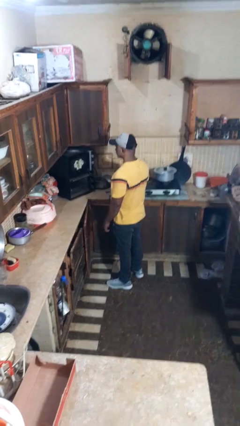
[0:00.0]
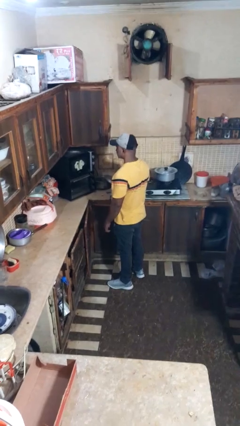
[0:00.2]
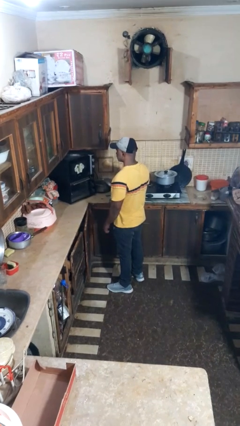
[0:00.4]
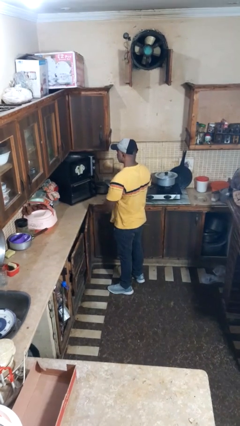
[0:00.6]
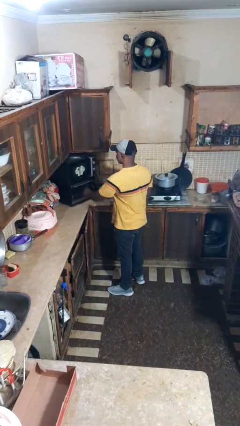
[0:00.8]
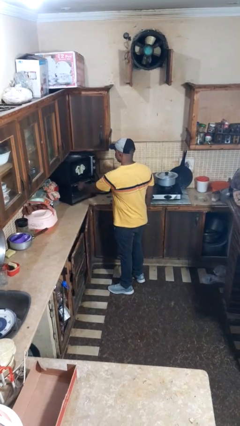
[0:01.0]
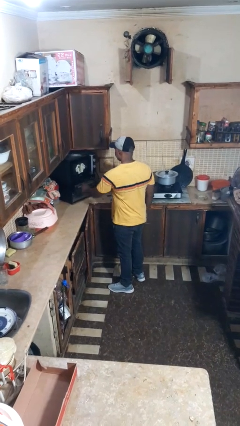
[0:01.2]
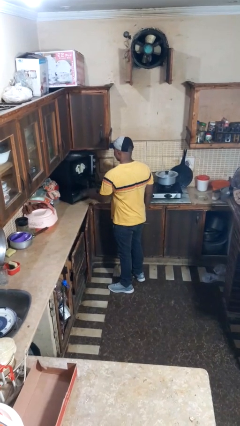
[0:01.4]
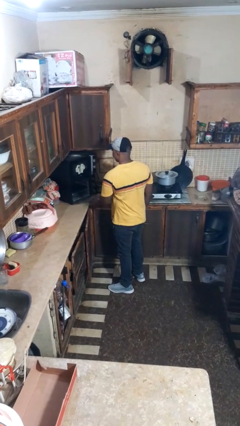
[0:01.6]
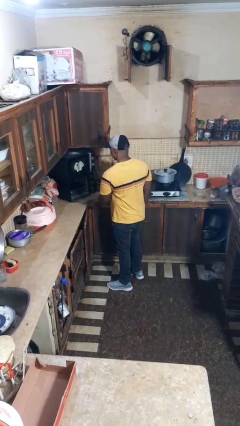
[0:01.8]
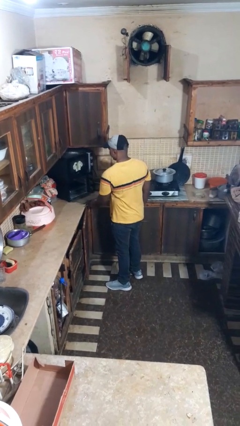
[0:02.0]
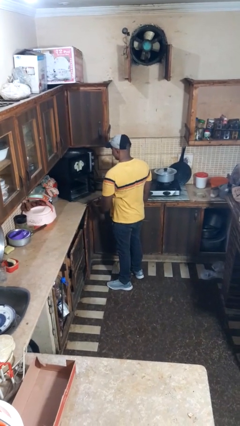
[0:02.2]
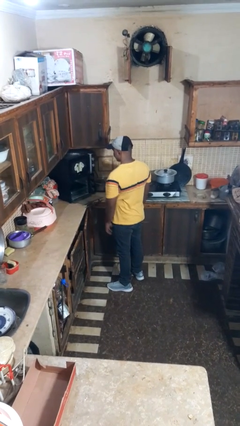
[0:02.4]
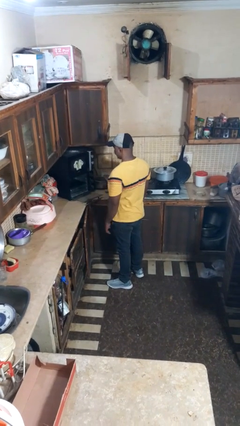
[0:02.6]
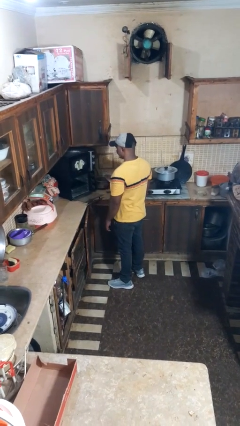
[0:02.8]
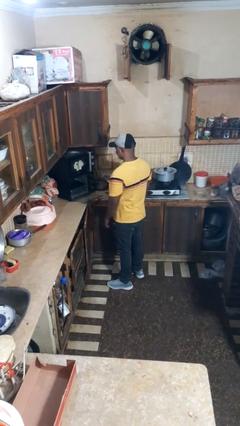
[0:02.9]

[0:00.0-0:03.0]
person opens oven door

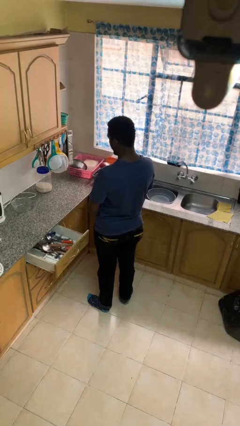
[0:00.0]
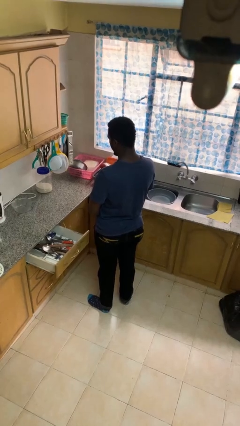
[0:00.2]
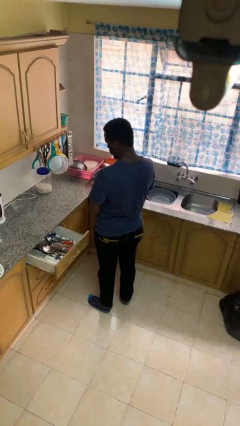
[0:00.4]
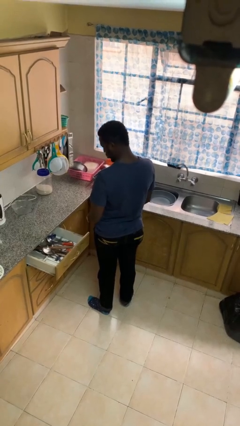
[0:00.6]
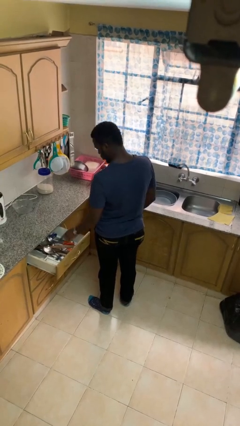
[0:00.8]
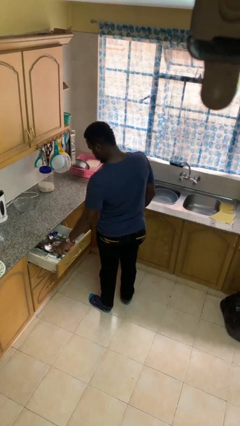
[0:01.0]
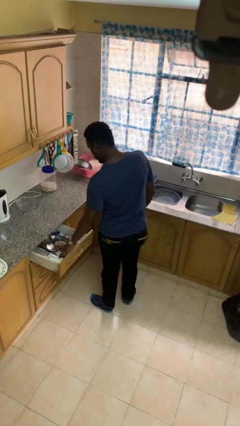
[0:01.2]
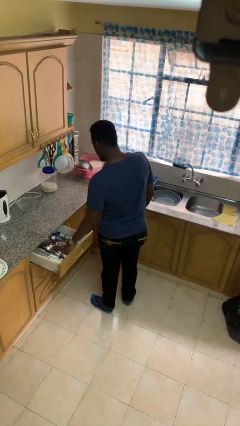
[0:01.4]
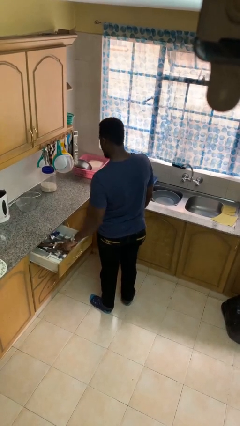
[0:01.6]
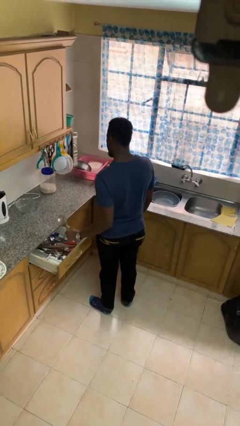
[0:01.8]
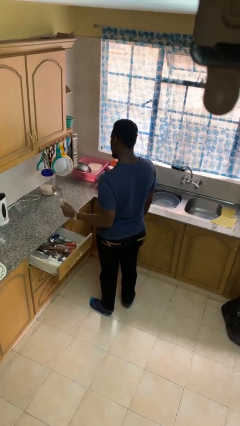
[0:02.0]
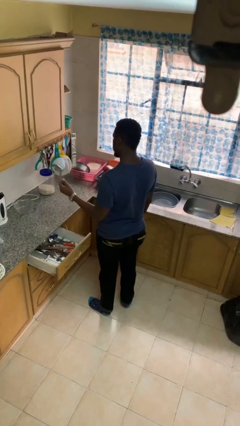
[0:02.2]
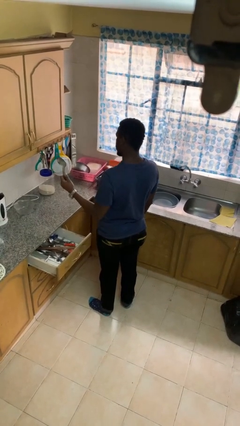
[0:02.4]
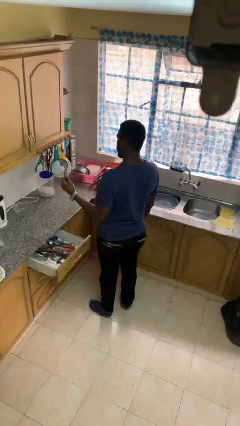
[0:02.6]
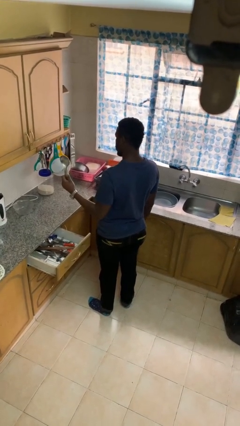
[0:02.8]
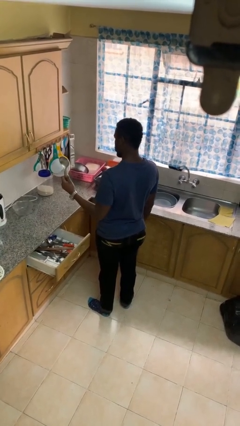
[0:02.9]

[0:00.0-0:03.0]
person takes object from kitchen drawer

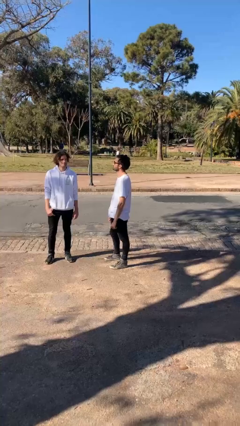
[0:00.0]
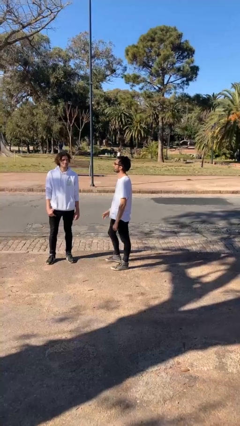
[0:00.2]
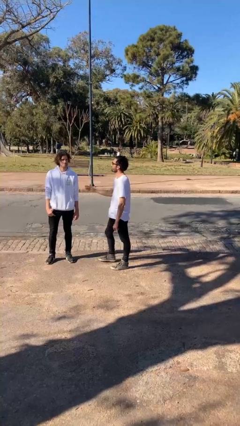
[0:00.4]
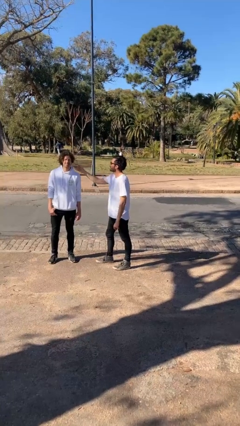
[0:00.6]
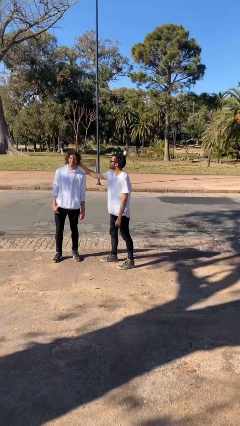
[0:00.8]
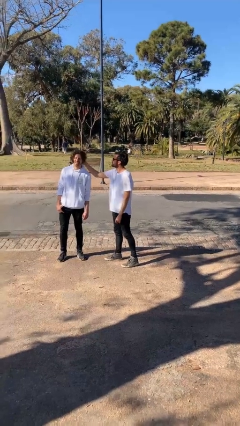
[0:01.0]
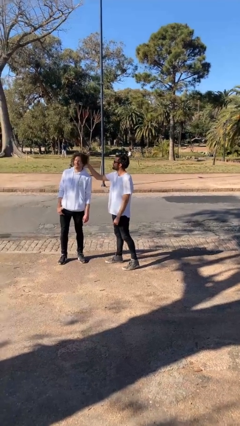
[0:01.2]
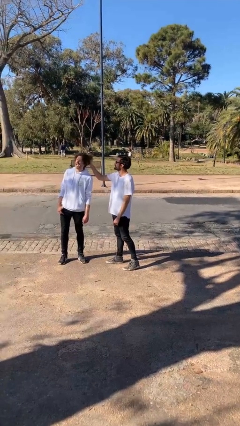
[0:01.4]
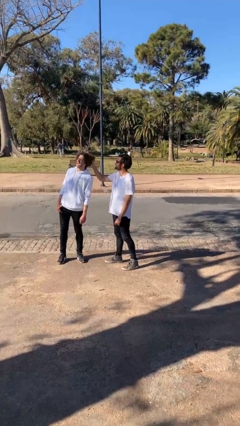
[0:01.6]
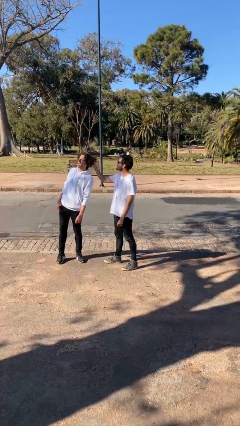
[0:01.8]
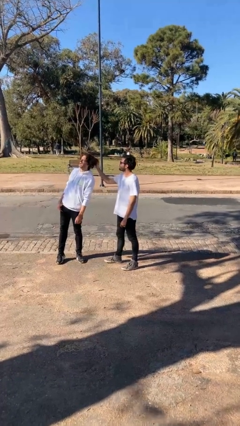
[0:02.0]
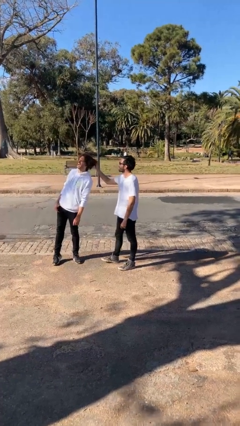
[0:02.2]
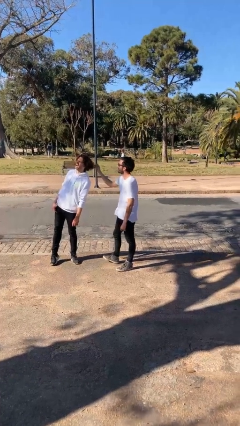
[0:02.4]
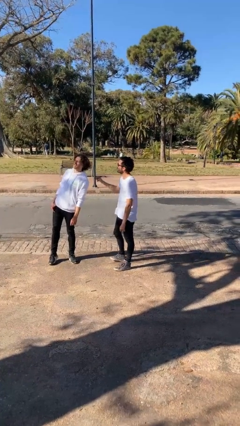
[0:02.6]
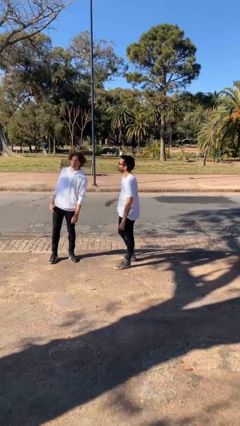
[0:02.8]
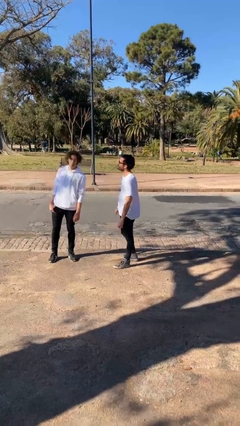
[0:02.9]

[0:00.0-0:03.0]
person grabs person by hair

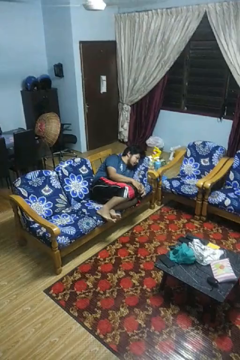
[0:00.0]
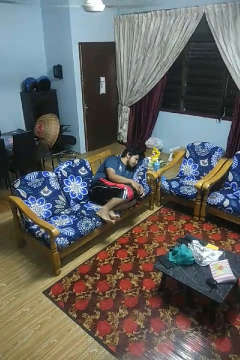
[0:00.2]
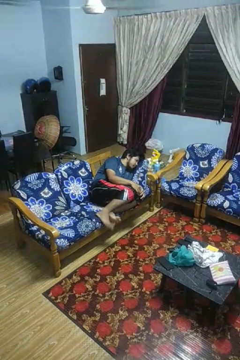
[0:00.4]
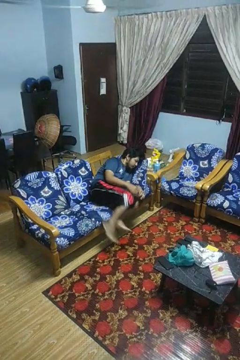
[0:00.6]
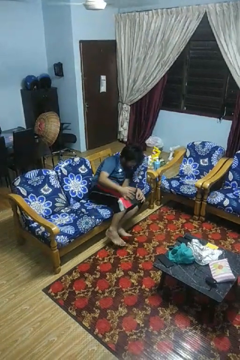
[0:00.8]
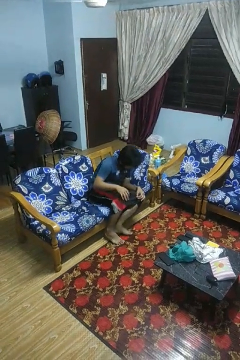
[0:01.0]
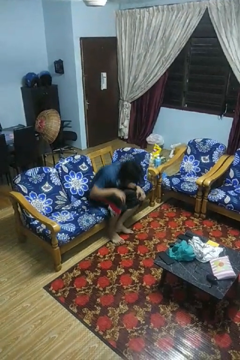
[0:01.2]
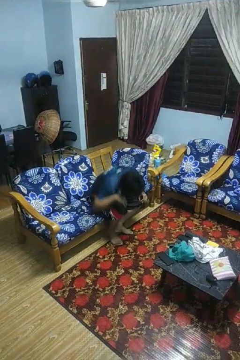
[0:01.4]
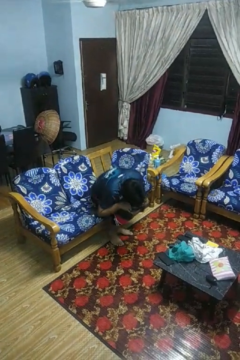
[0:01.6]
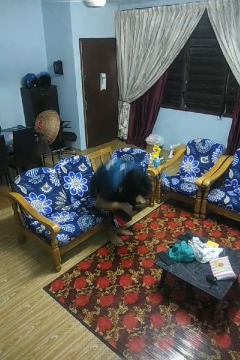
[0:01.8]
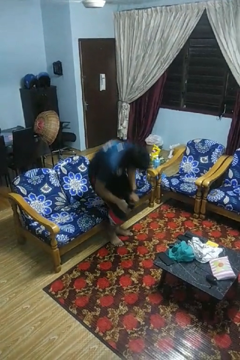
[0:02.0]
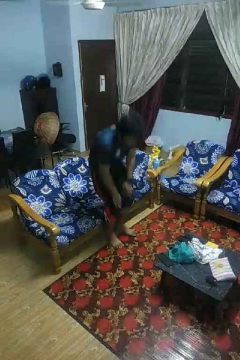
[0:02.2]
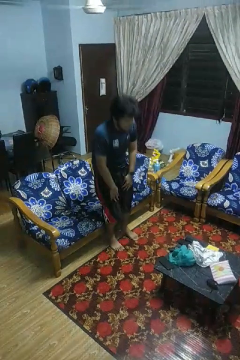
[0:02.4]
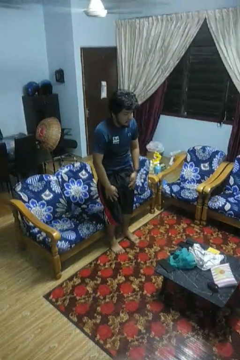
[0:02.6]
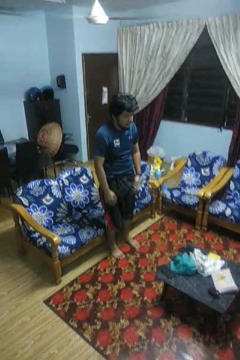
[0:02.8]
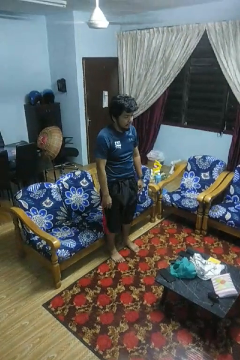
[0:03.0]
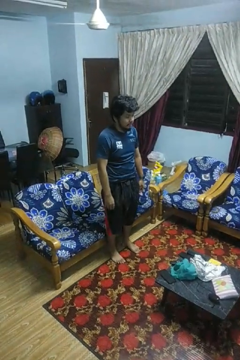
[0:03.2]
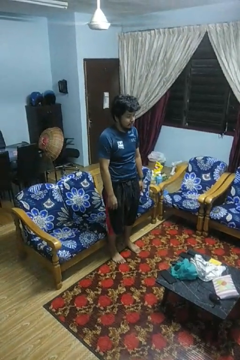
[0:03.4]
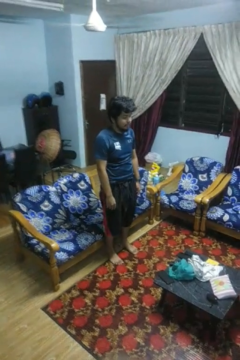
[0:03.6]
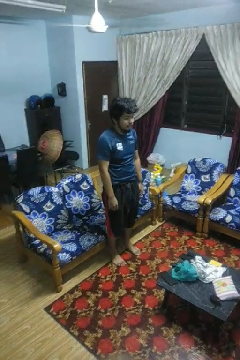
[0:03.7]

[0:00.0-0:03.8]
person stands up

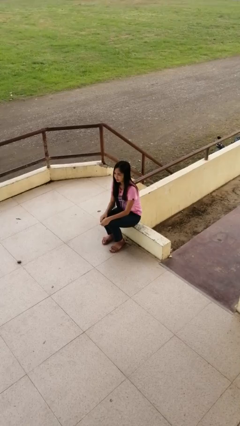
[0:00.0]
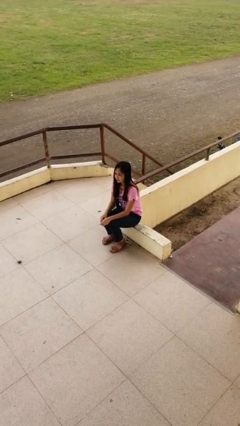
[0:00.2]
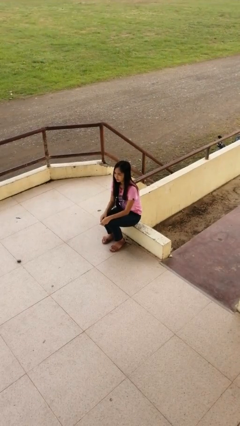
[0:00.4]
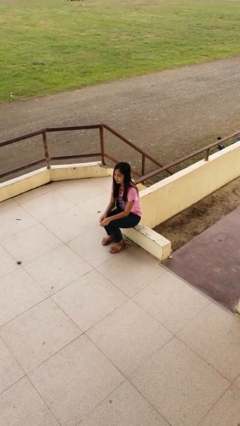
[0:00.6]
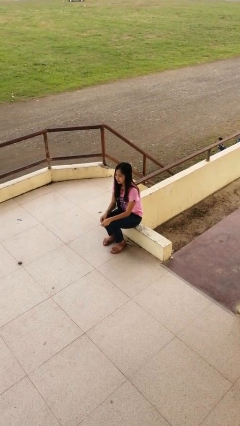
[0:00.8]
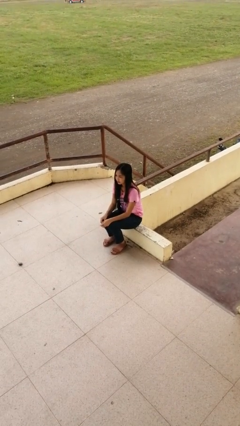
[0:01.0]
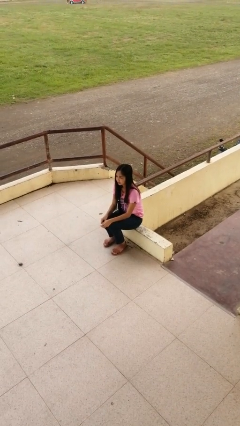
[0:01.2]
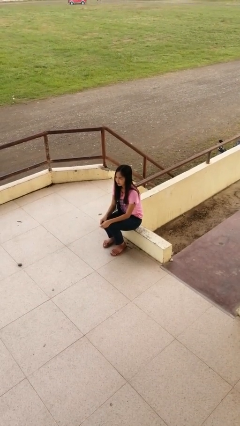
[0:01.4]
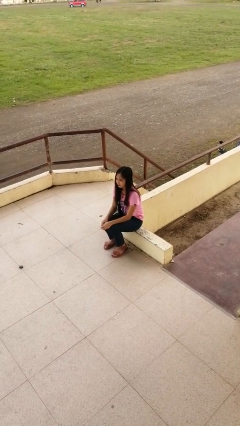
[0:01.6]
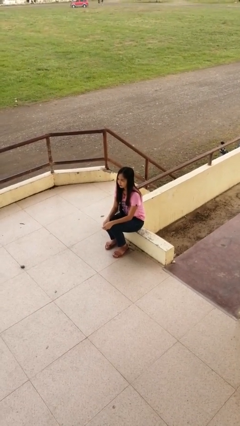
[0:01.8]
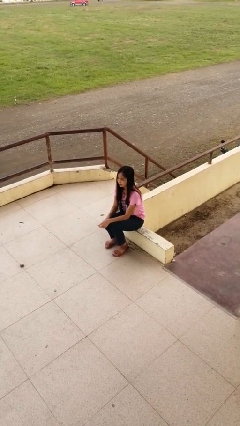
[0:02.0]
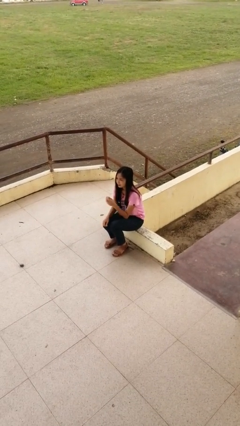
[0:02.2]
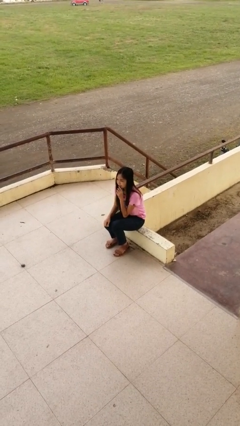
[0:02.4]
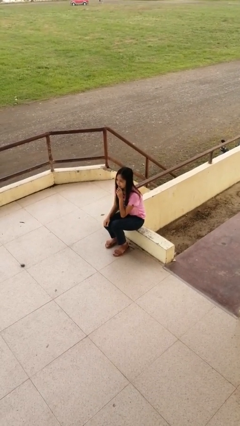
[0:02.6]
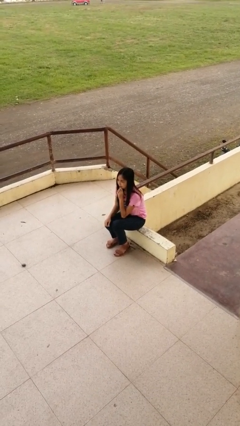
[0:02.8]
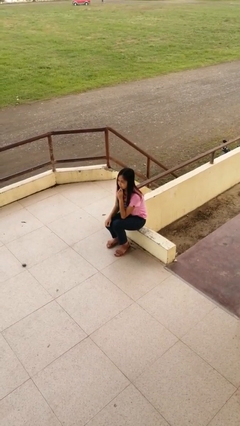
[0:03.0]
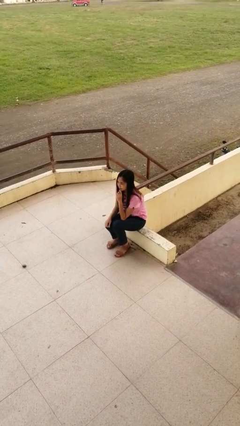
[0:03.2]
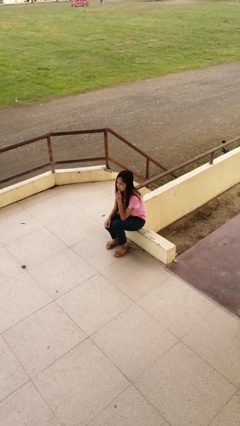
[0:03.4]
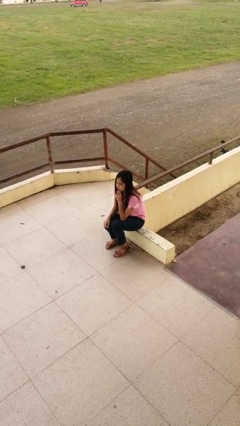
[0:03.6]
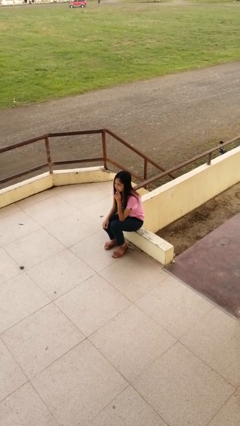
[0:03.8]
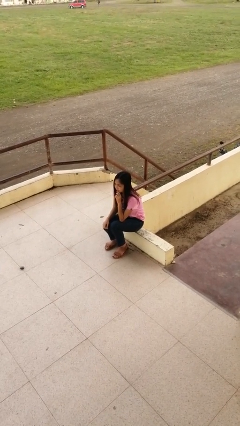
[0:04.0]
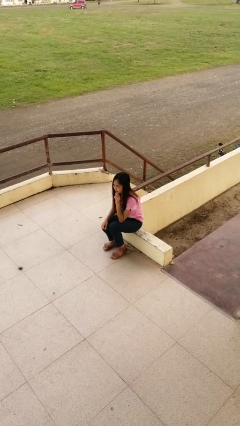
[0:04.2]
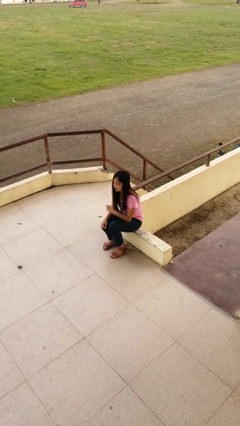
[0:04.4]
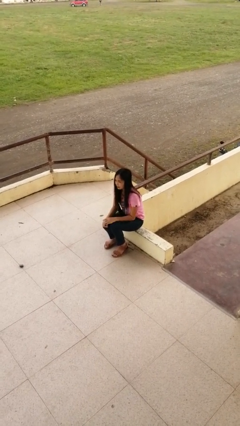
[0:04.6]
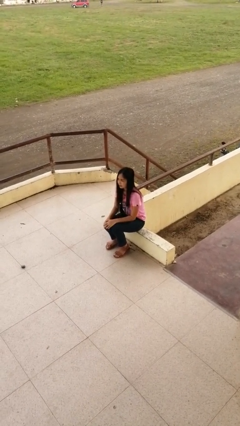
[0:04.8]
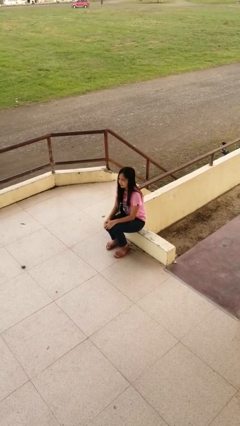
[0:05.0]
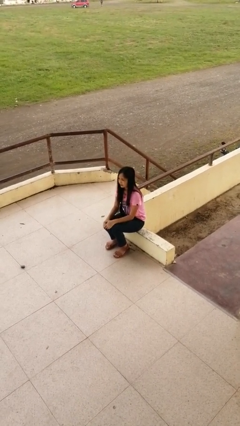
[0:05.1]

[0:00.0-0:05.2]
person strokes chin

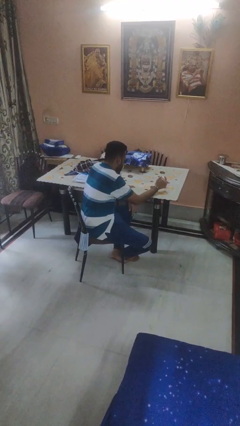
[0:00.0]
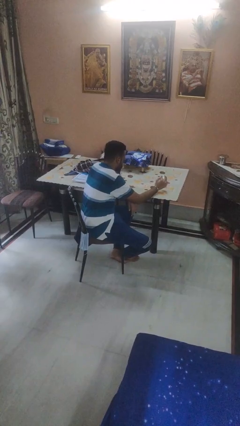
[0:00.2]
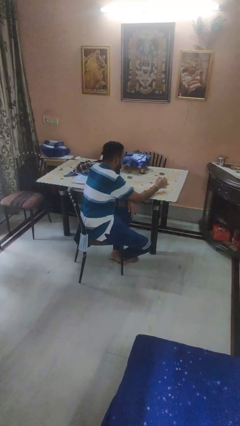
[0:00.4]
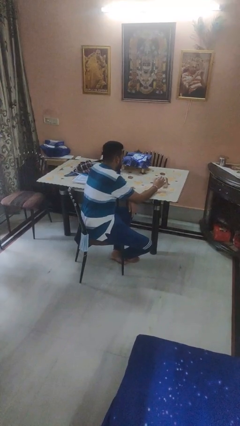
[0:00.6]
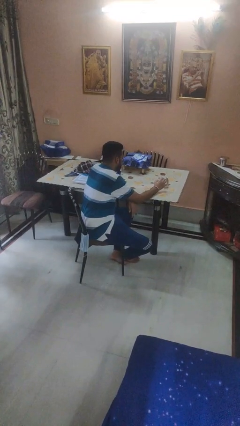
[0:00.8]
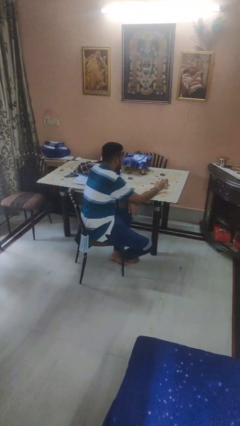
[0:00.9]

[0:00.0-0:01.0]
person knocks over glass
